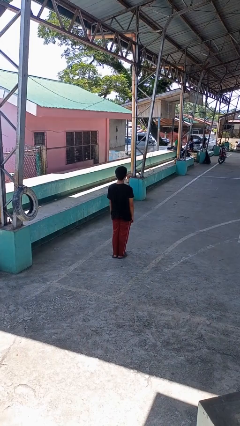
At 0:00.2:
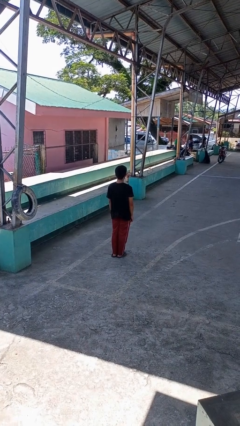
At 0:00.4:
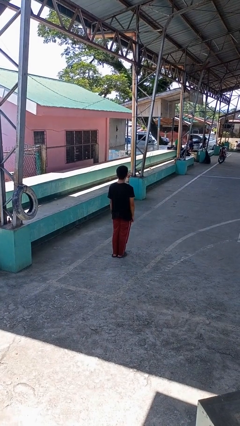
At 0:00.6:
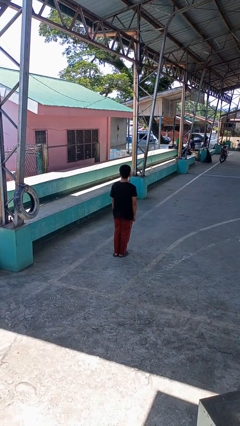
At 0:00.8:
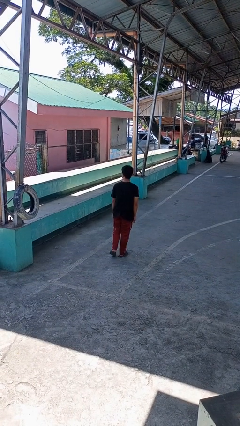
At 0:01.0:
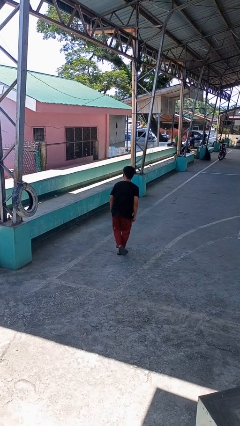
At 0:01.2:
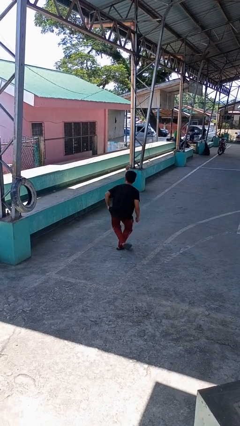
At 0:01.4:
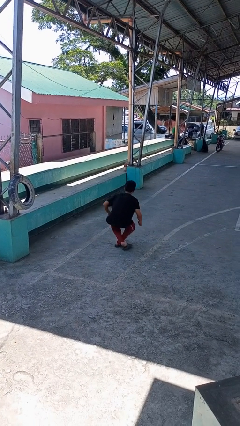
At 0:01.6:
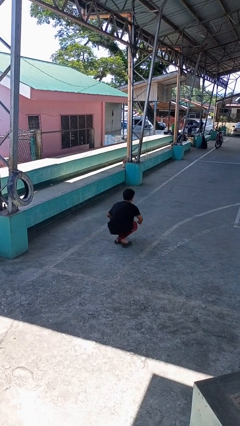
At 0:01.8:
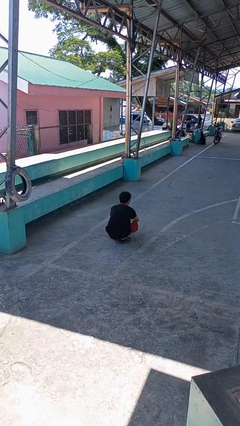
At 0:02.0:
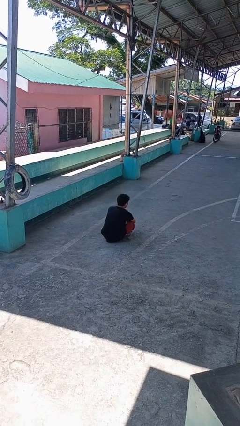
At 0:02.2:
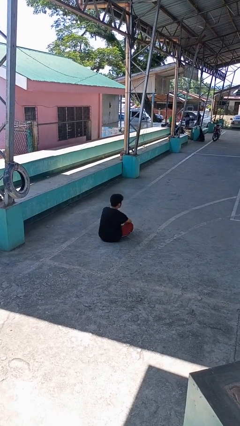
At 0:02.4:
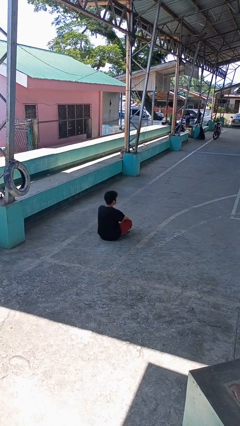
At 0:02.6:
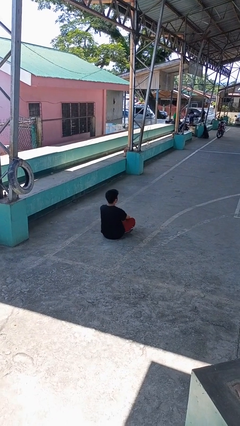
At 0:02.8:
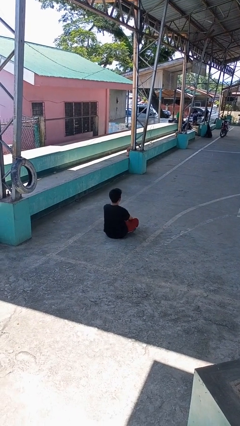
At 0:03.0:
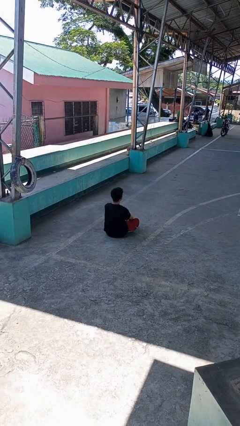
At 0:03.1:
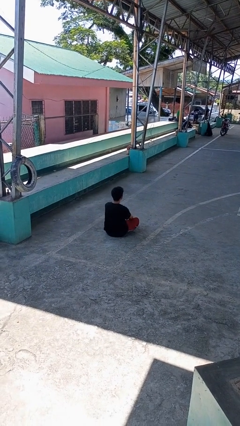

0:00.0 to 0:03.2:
person sits crisscross

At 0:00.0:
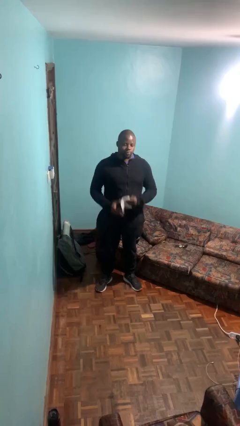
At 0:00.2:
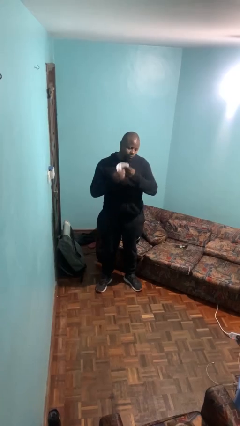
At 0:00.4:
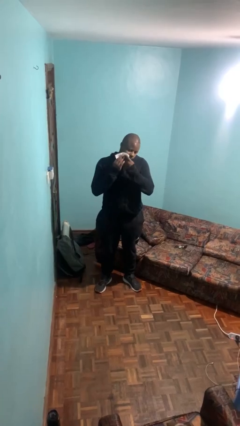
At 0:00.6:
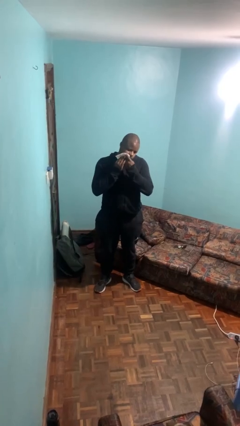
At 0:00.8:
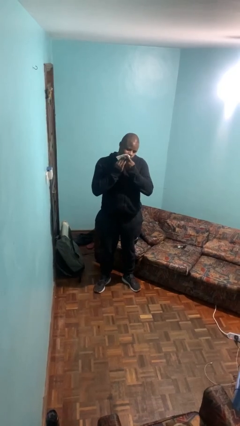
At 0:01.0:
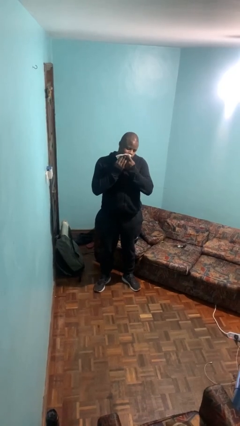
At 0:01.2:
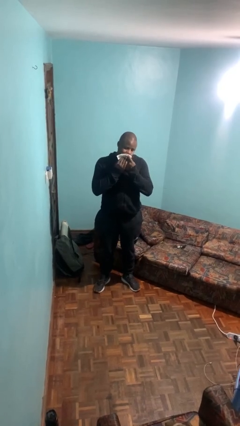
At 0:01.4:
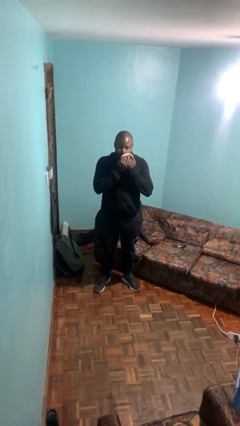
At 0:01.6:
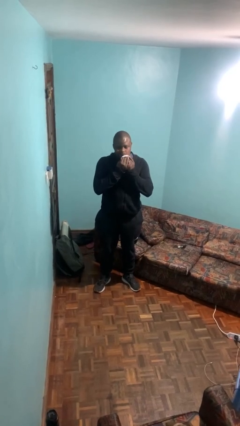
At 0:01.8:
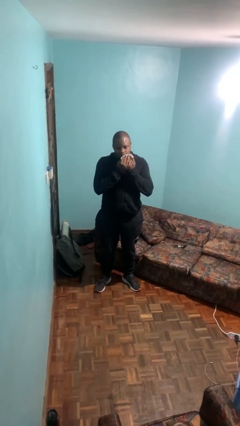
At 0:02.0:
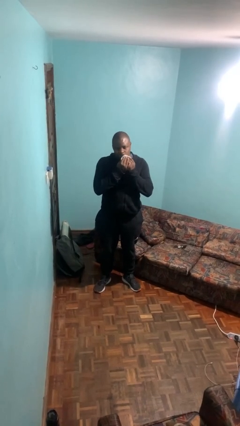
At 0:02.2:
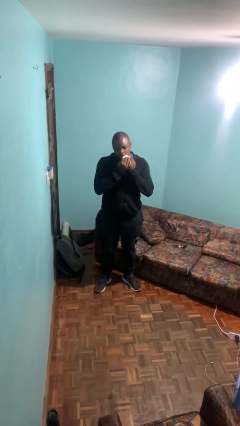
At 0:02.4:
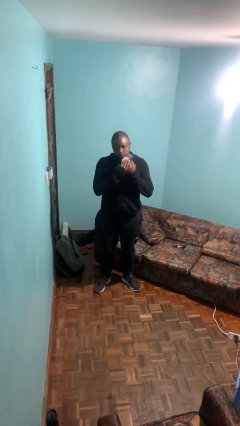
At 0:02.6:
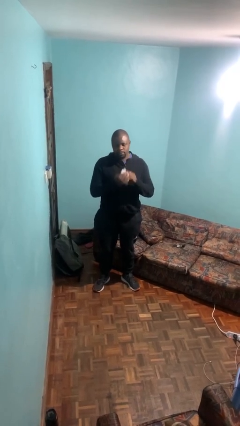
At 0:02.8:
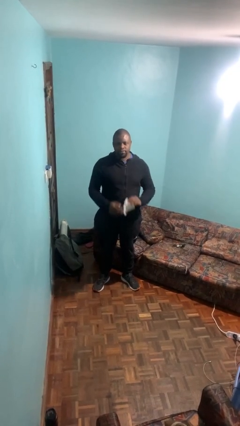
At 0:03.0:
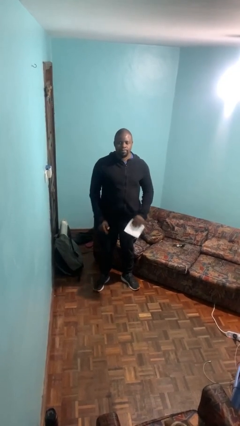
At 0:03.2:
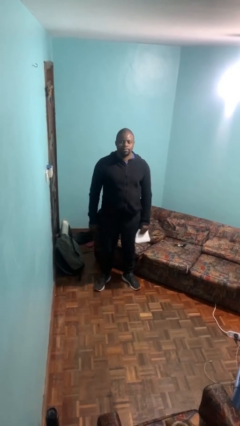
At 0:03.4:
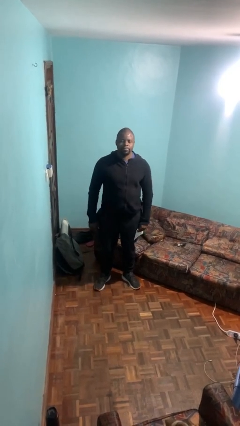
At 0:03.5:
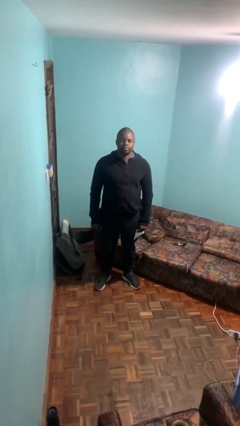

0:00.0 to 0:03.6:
person wipes mouth with napkin

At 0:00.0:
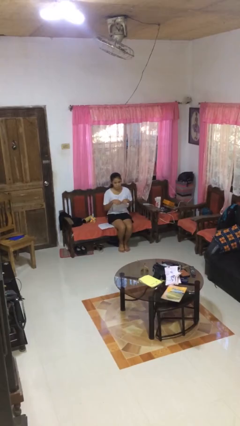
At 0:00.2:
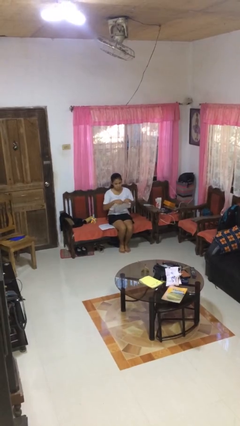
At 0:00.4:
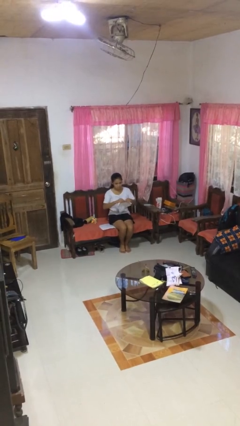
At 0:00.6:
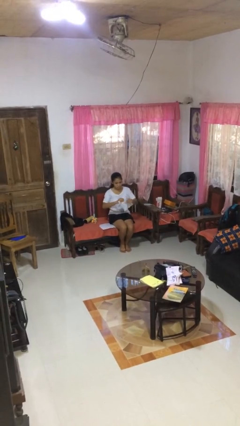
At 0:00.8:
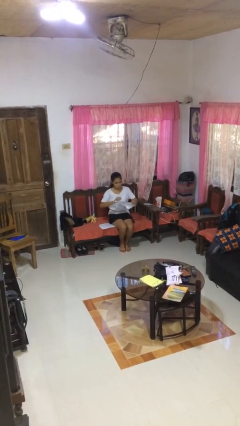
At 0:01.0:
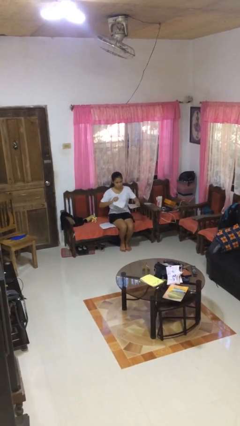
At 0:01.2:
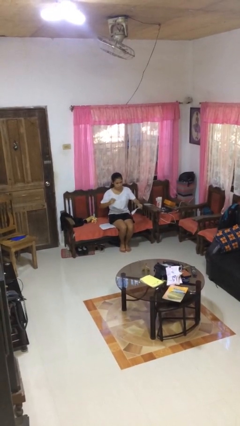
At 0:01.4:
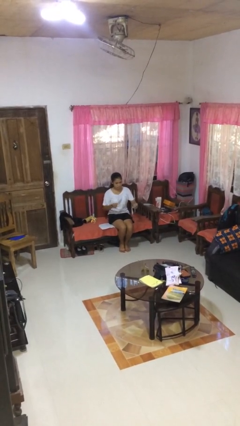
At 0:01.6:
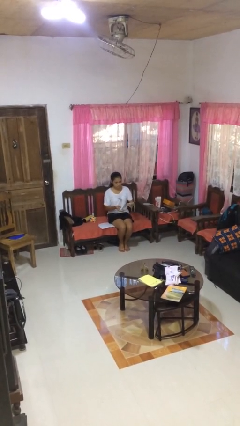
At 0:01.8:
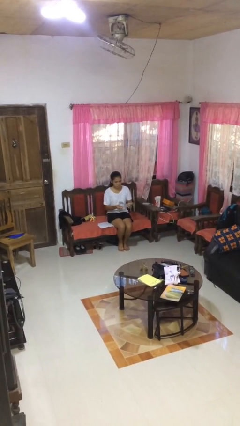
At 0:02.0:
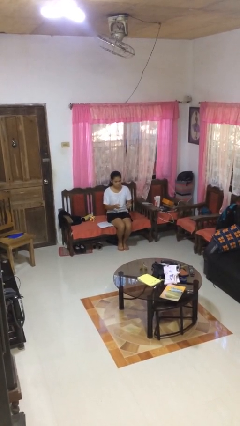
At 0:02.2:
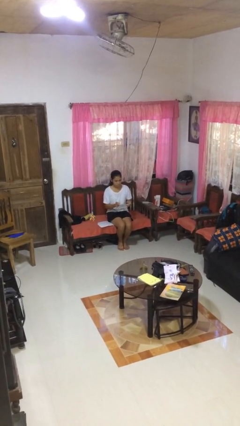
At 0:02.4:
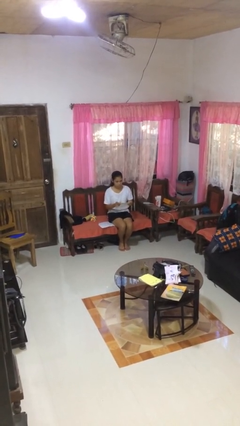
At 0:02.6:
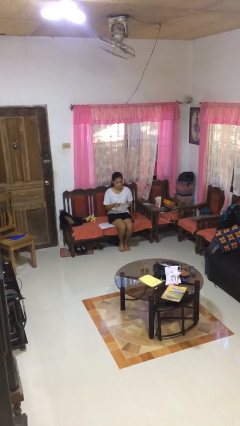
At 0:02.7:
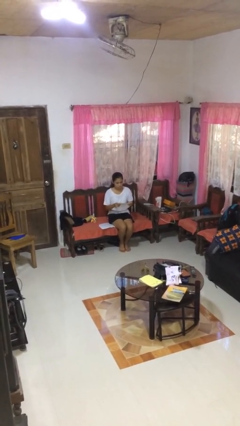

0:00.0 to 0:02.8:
person tears paper

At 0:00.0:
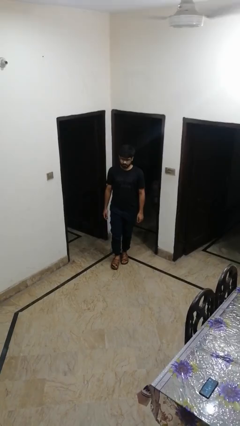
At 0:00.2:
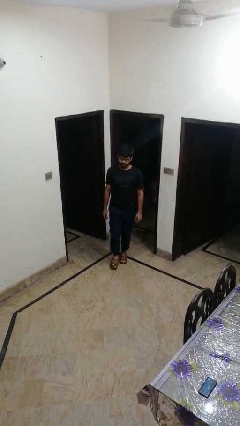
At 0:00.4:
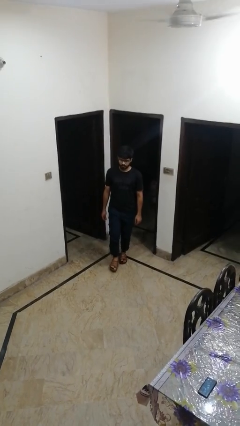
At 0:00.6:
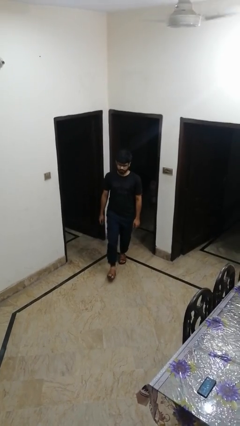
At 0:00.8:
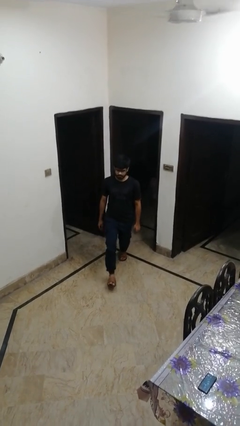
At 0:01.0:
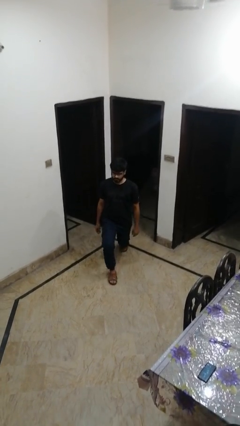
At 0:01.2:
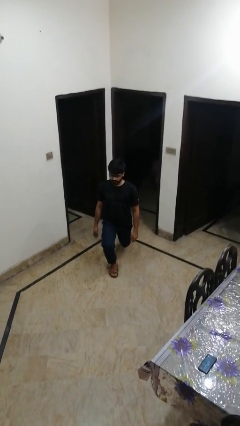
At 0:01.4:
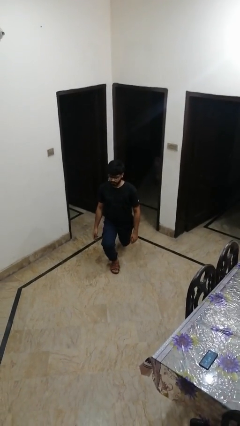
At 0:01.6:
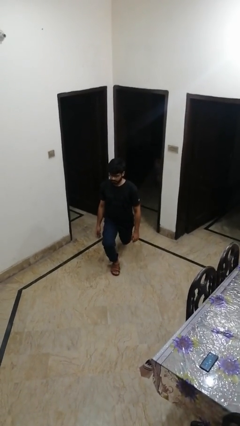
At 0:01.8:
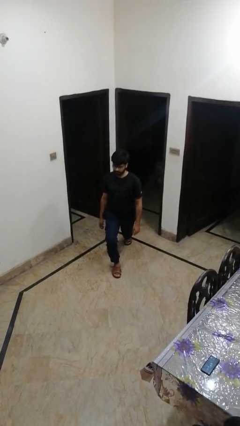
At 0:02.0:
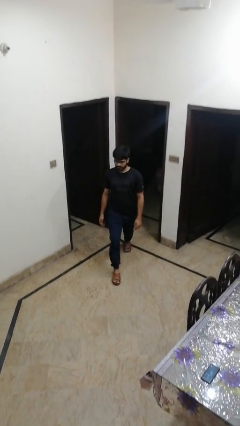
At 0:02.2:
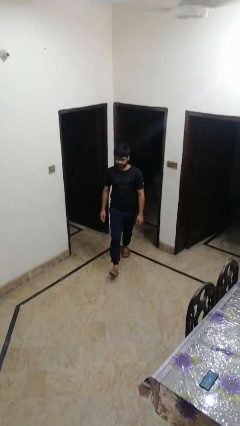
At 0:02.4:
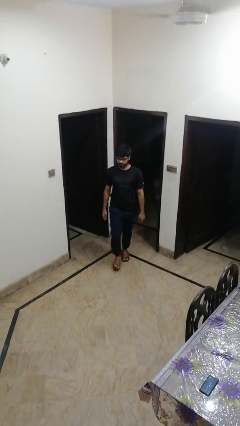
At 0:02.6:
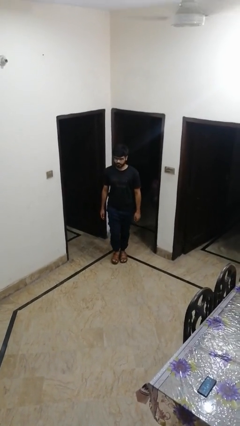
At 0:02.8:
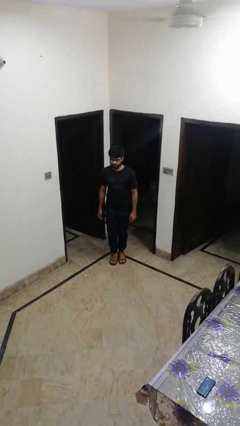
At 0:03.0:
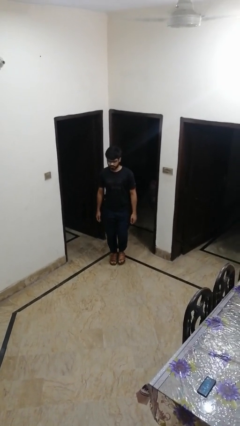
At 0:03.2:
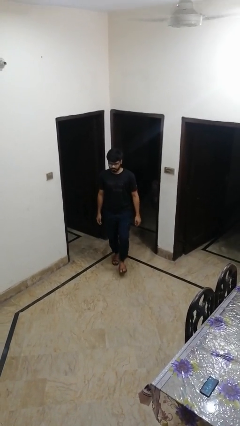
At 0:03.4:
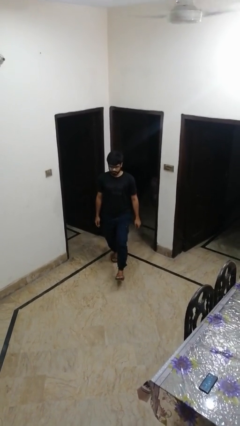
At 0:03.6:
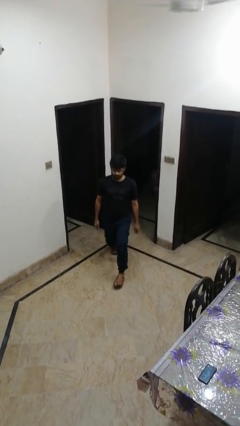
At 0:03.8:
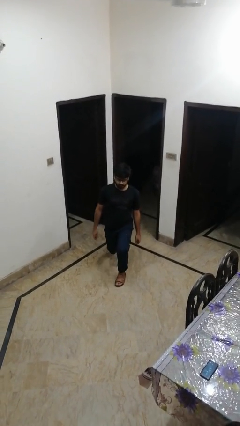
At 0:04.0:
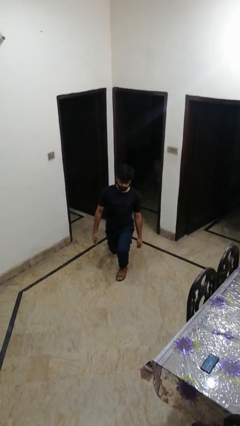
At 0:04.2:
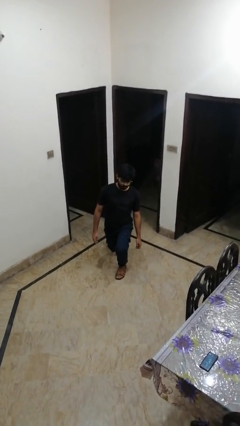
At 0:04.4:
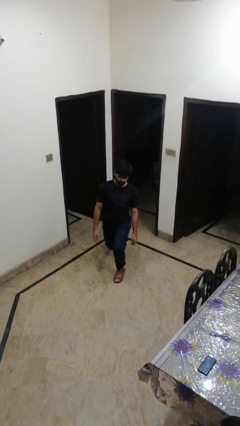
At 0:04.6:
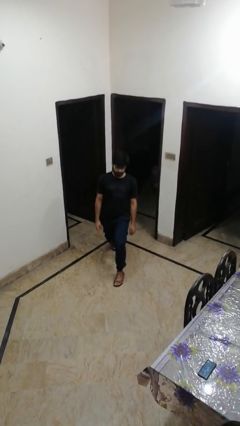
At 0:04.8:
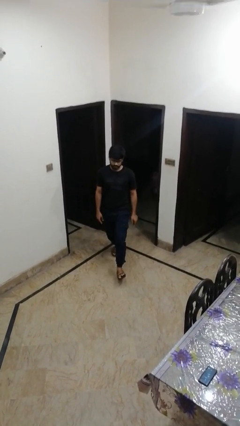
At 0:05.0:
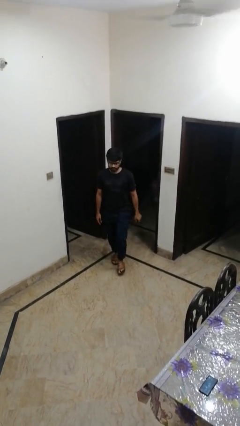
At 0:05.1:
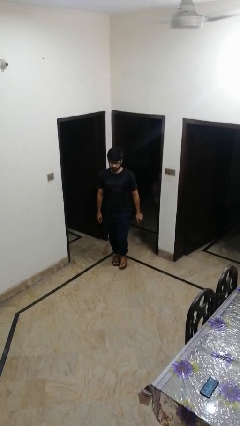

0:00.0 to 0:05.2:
person exercises with lunges

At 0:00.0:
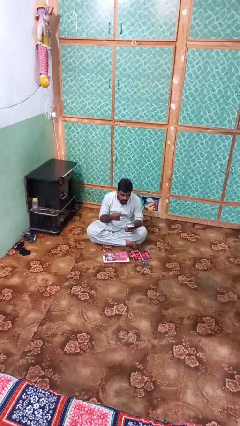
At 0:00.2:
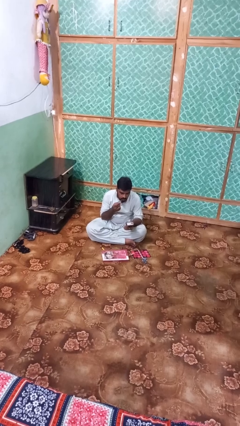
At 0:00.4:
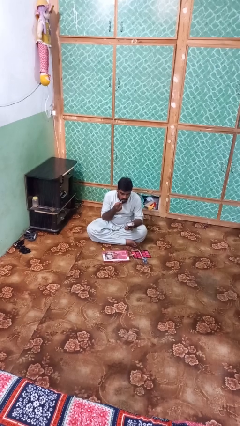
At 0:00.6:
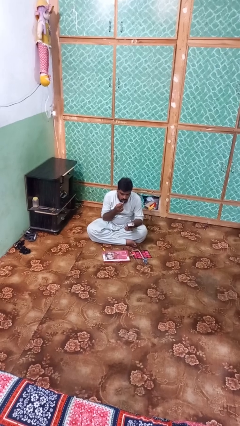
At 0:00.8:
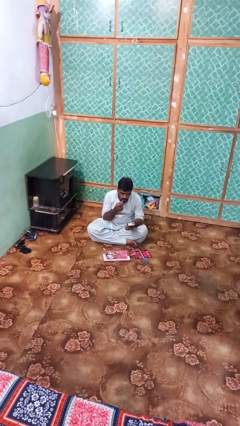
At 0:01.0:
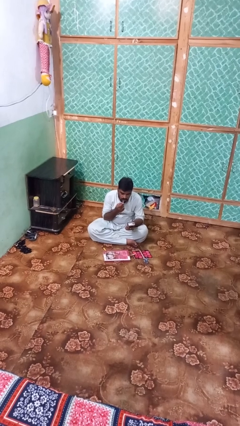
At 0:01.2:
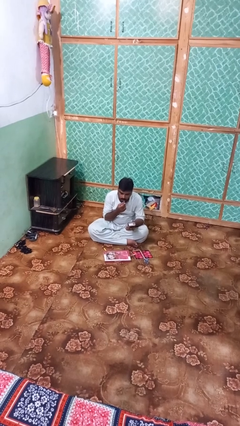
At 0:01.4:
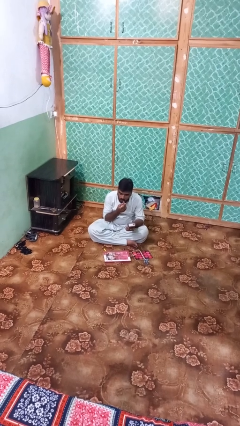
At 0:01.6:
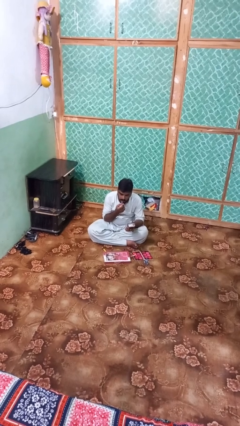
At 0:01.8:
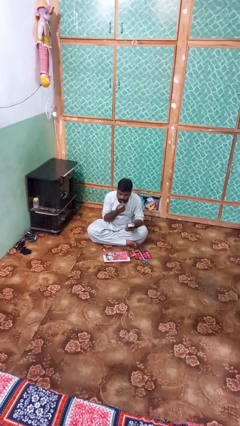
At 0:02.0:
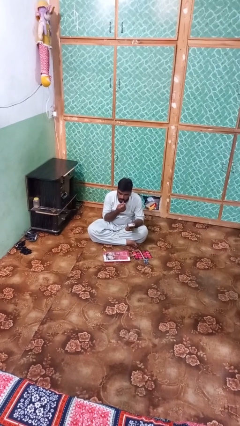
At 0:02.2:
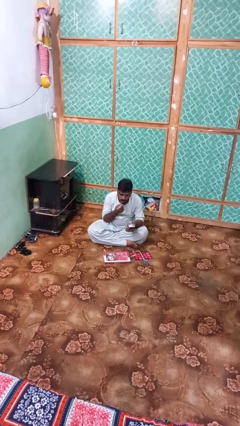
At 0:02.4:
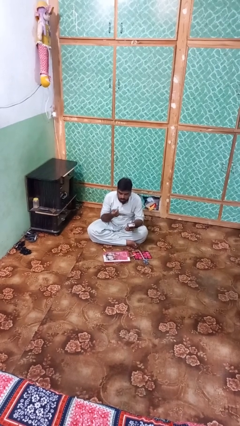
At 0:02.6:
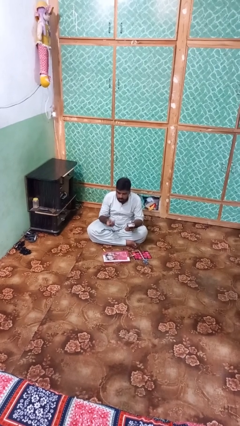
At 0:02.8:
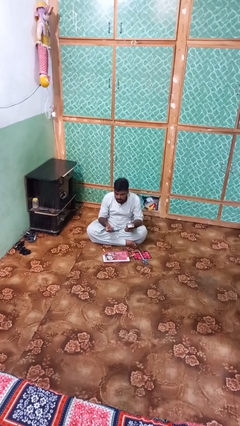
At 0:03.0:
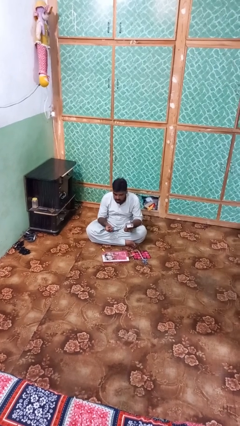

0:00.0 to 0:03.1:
person applies lip makeup
